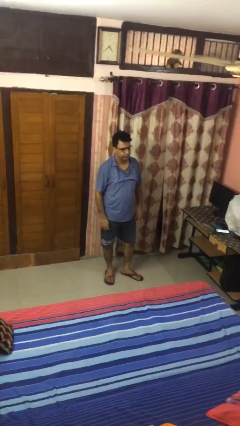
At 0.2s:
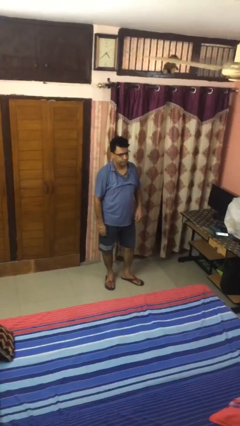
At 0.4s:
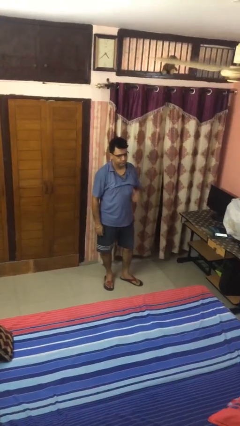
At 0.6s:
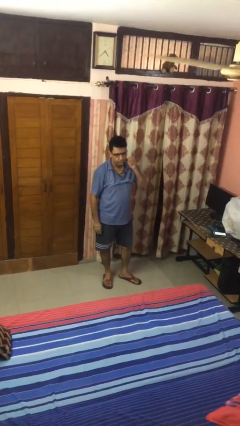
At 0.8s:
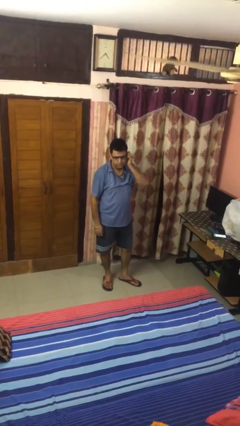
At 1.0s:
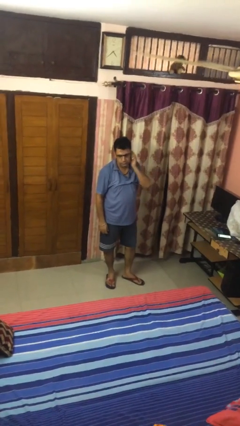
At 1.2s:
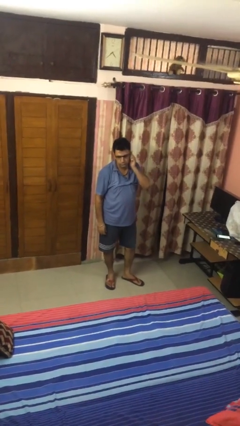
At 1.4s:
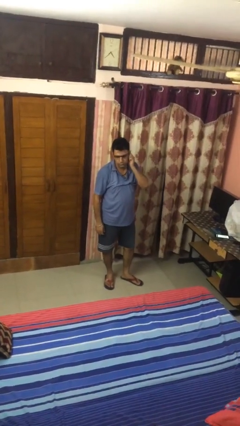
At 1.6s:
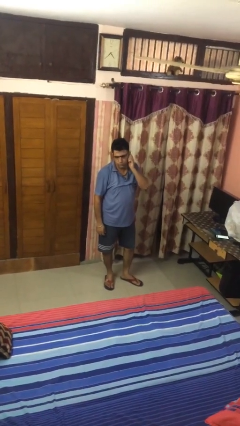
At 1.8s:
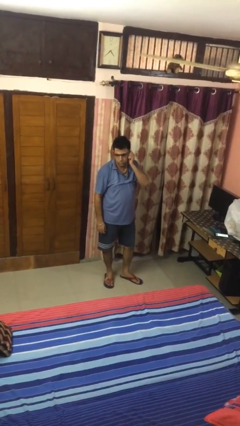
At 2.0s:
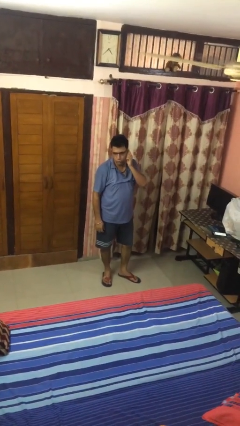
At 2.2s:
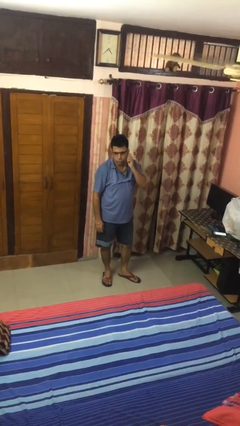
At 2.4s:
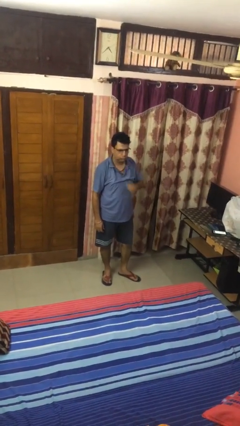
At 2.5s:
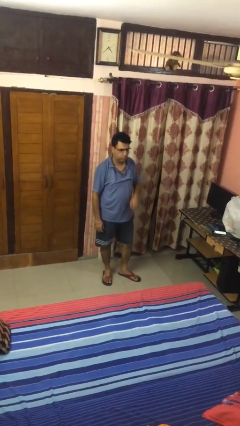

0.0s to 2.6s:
person touches earlobe

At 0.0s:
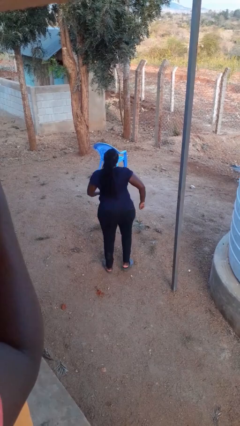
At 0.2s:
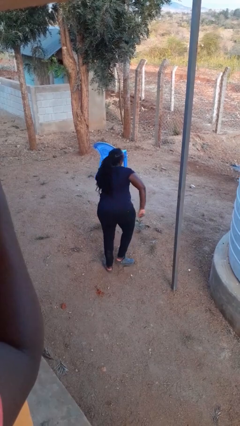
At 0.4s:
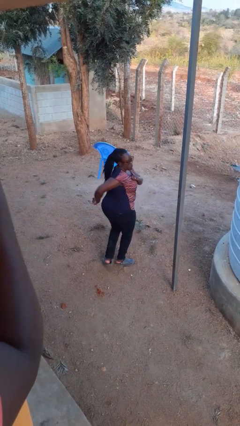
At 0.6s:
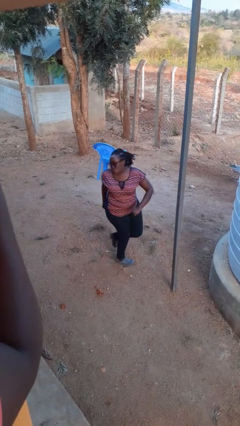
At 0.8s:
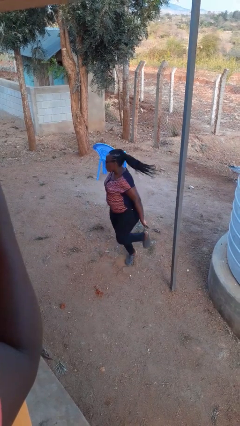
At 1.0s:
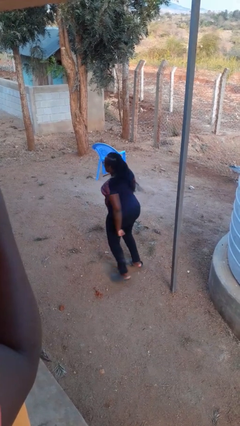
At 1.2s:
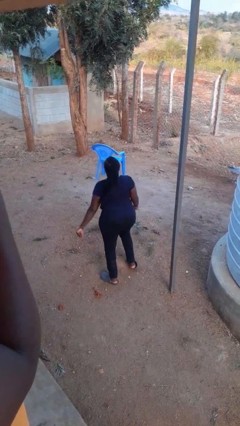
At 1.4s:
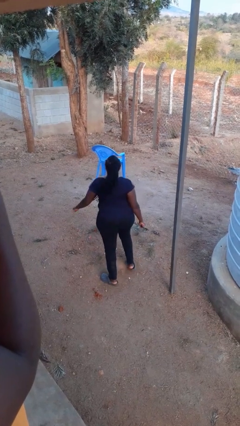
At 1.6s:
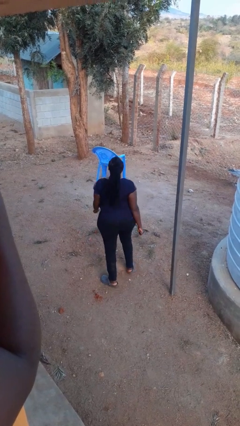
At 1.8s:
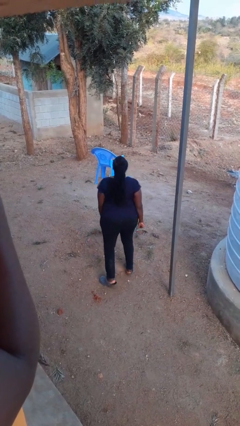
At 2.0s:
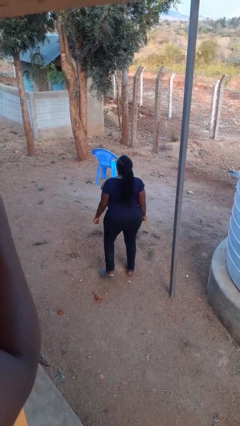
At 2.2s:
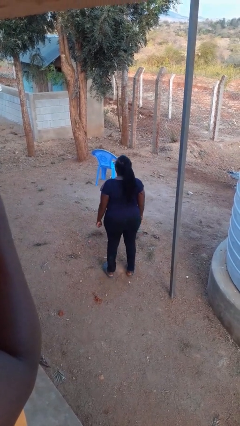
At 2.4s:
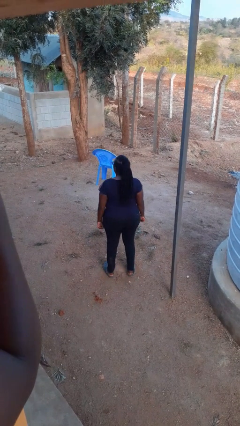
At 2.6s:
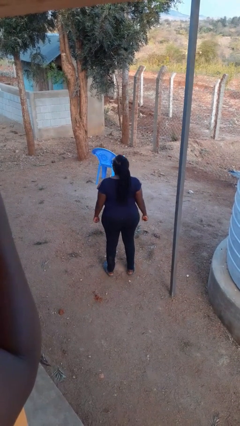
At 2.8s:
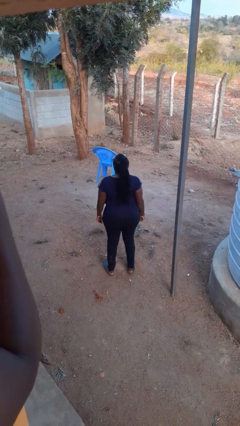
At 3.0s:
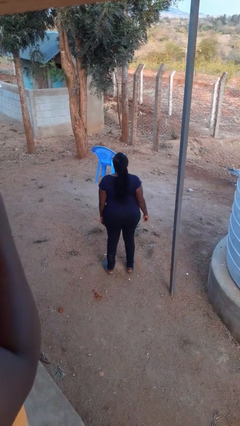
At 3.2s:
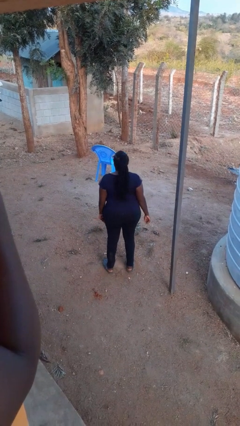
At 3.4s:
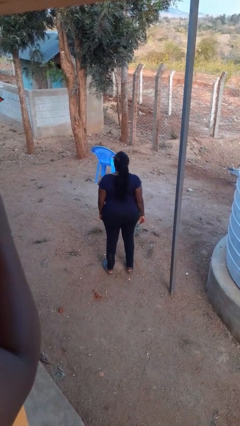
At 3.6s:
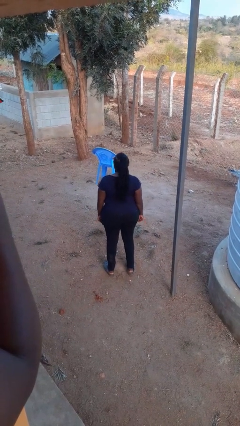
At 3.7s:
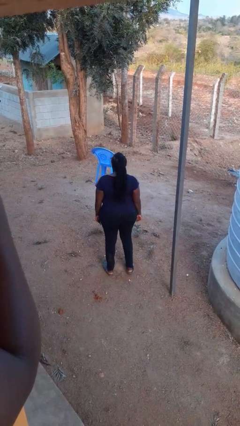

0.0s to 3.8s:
person twirls

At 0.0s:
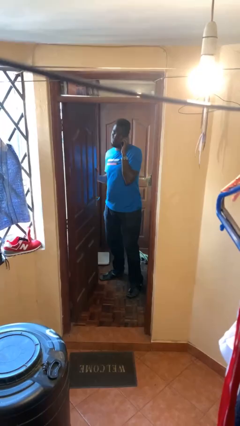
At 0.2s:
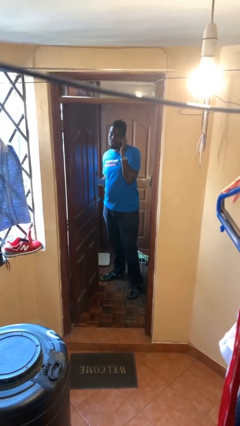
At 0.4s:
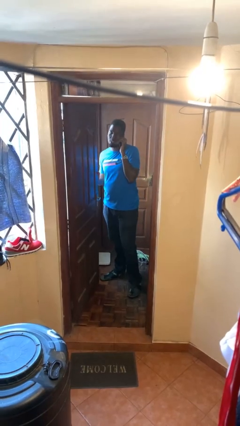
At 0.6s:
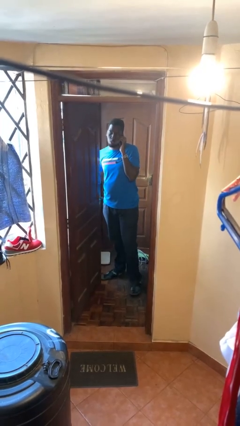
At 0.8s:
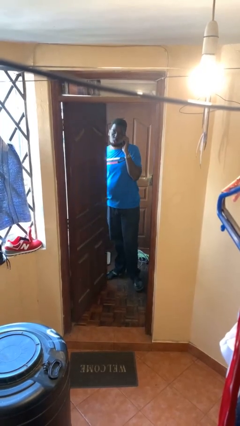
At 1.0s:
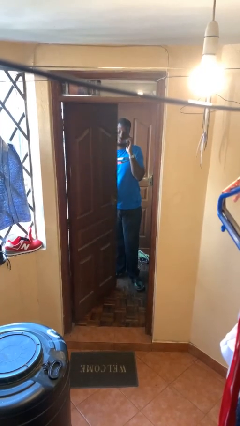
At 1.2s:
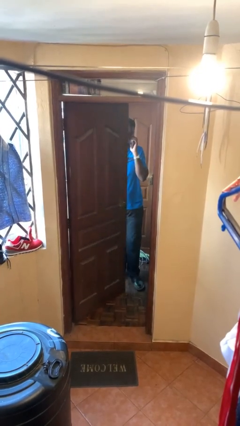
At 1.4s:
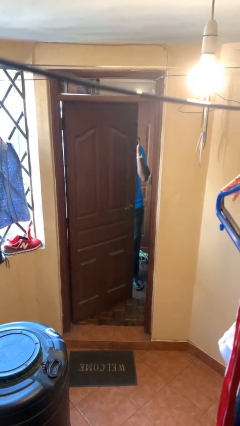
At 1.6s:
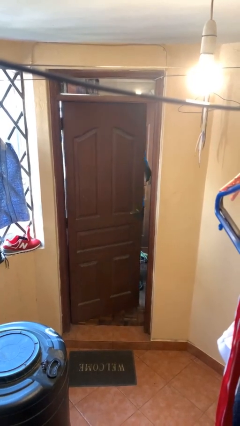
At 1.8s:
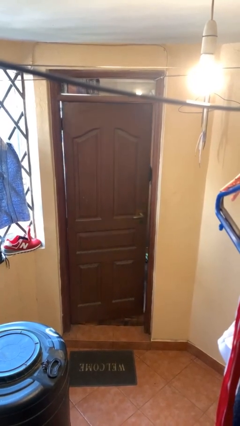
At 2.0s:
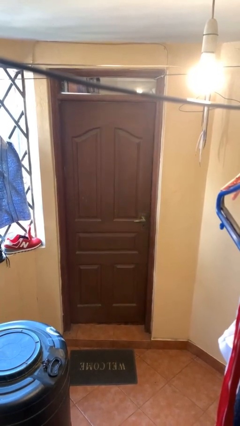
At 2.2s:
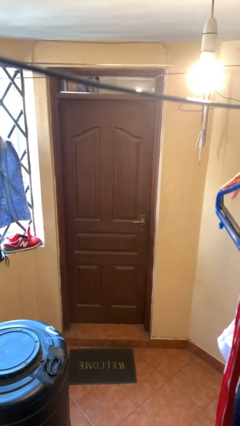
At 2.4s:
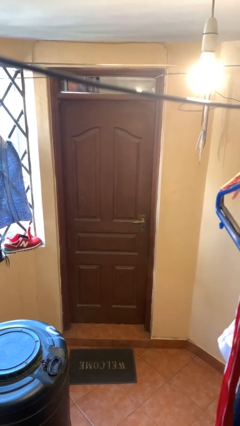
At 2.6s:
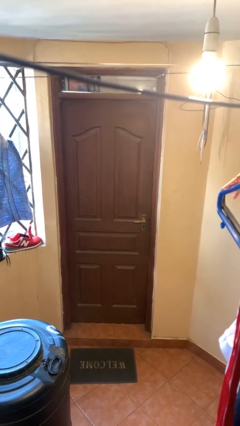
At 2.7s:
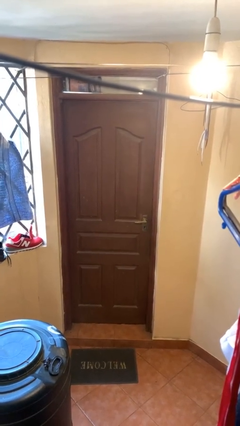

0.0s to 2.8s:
person closes facility door

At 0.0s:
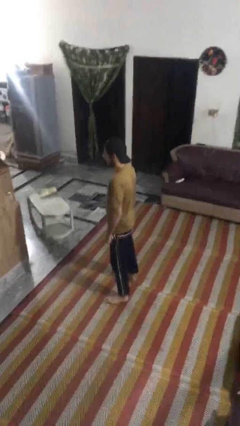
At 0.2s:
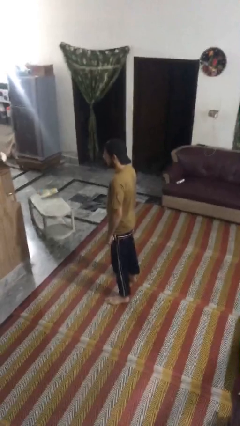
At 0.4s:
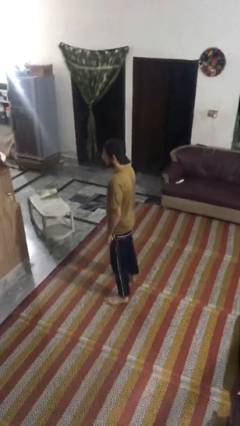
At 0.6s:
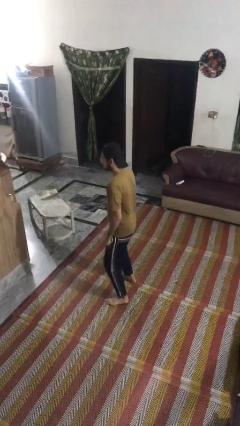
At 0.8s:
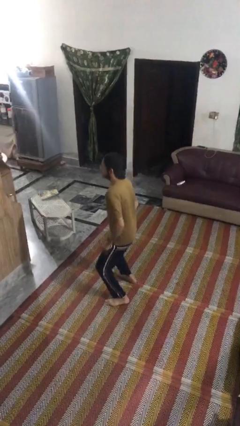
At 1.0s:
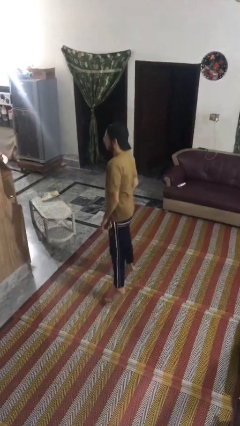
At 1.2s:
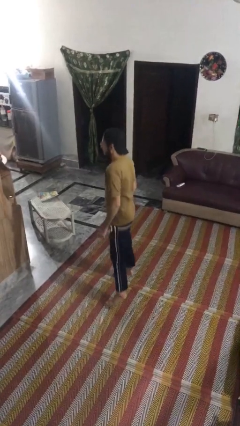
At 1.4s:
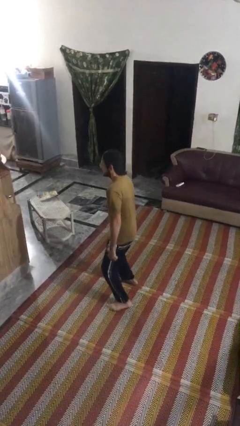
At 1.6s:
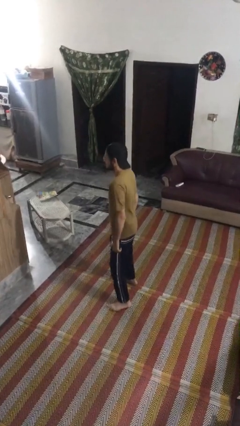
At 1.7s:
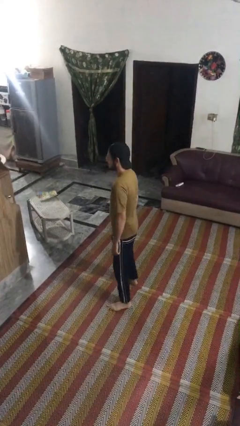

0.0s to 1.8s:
person jumps

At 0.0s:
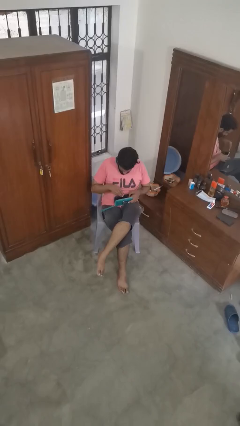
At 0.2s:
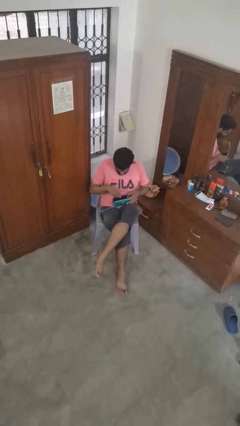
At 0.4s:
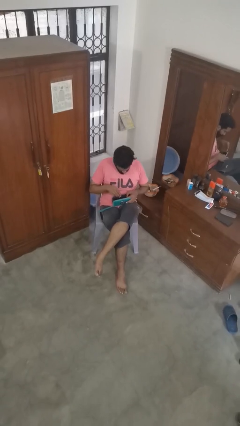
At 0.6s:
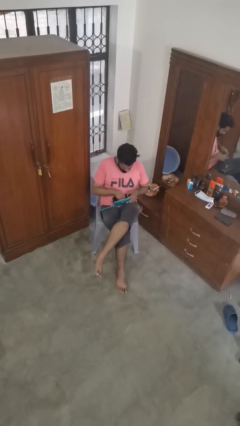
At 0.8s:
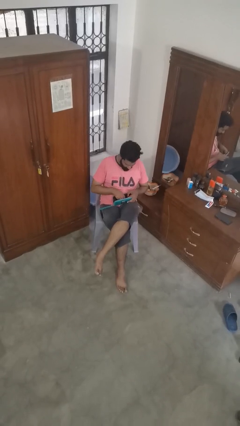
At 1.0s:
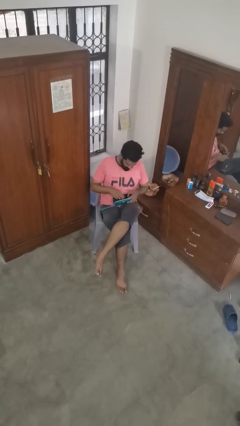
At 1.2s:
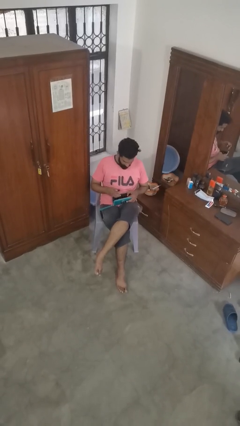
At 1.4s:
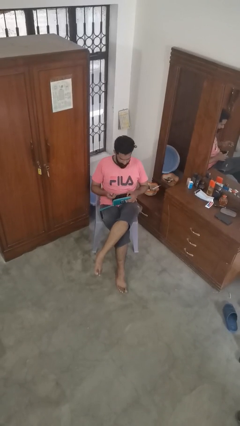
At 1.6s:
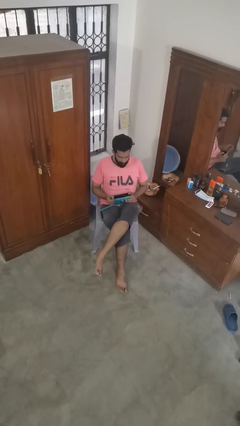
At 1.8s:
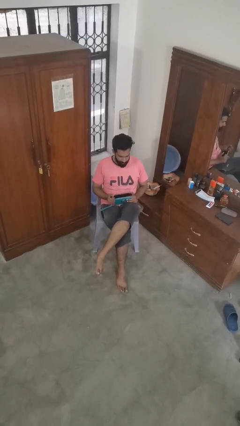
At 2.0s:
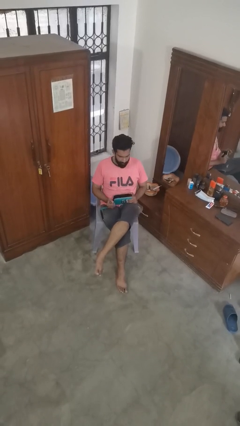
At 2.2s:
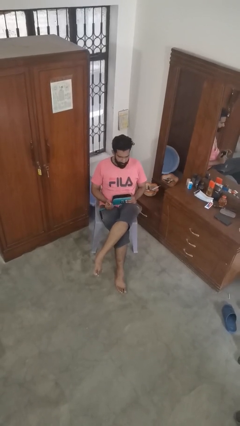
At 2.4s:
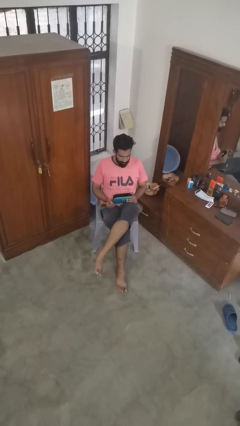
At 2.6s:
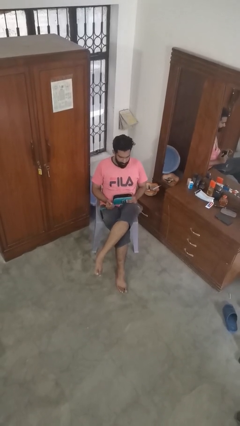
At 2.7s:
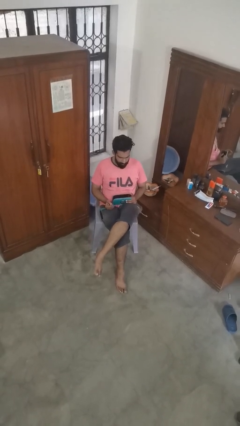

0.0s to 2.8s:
person takes object from purse

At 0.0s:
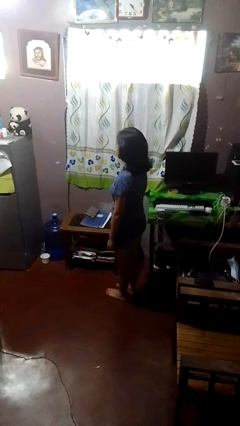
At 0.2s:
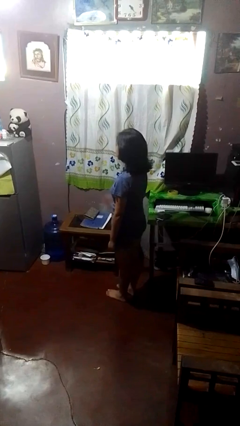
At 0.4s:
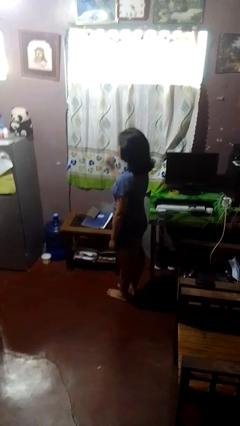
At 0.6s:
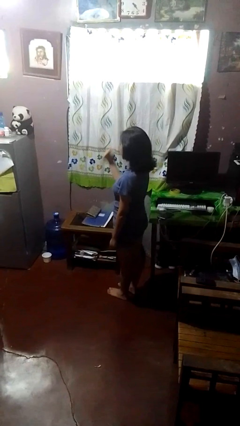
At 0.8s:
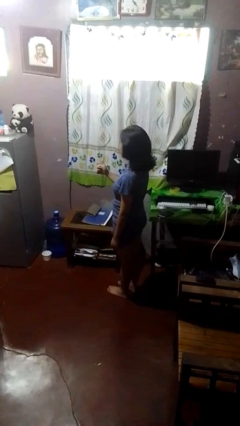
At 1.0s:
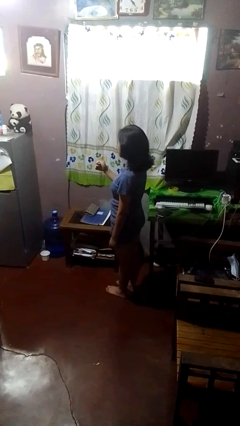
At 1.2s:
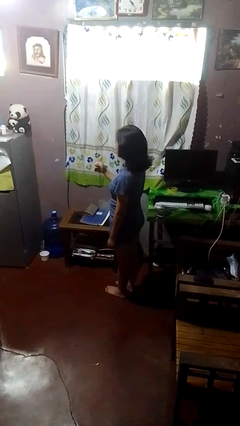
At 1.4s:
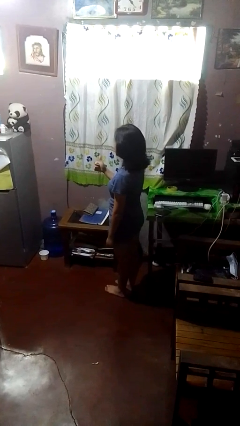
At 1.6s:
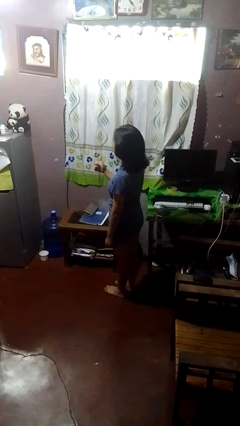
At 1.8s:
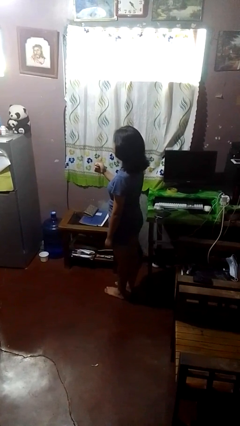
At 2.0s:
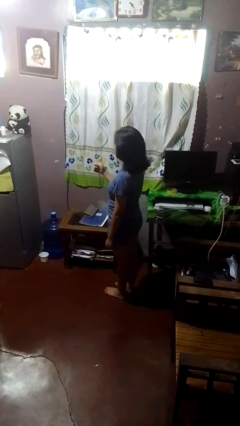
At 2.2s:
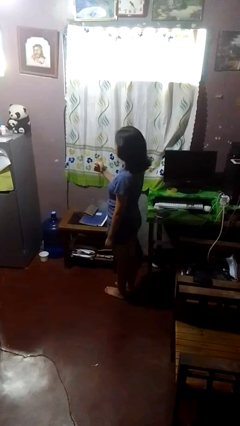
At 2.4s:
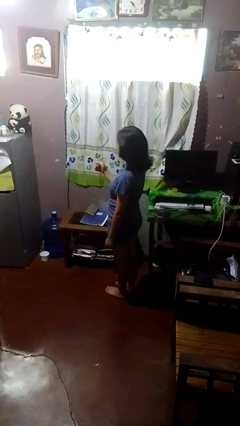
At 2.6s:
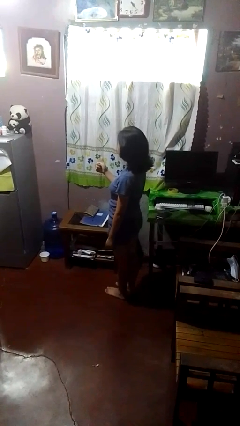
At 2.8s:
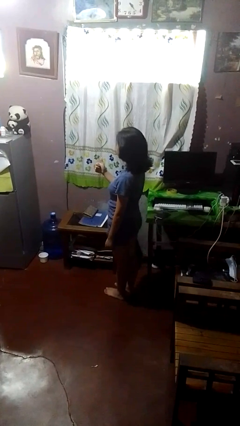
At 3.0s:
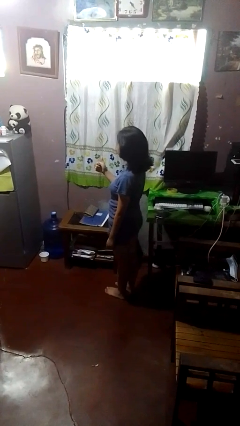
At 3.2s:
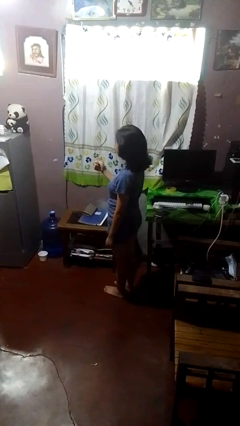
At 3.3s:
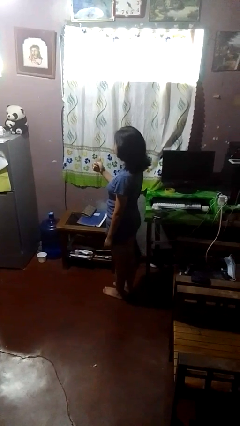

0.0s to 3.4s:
person gestures thumbs up

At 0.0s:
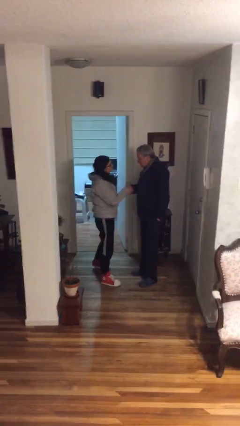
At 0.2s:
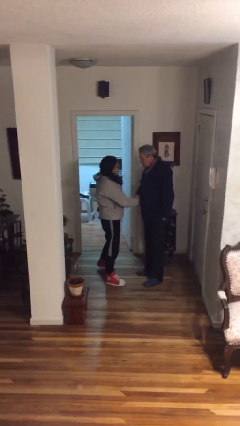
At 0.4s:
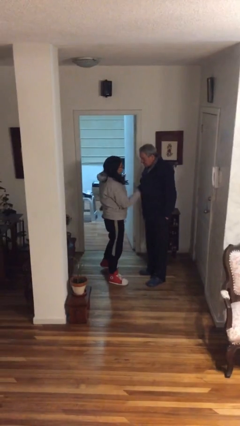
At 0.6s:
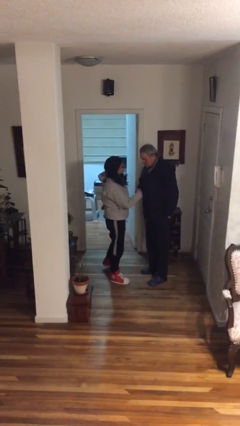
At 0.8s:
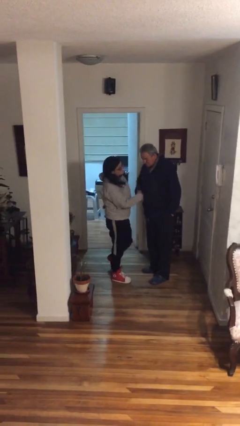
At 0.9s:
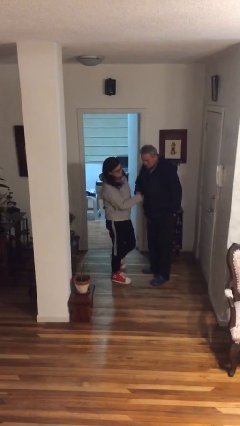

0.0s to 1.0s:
person shakes hand
